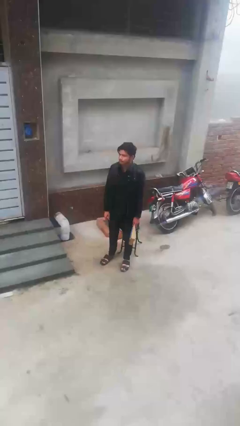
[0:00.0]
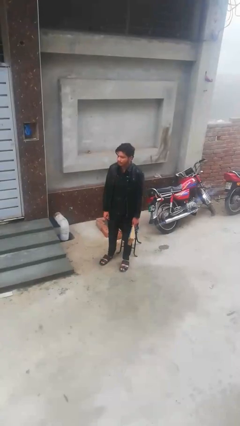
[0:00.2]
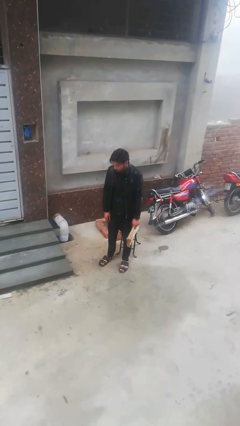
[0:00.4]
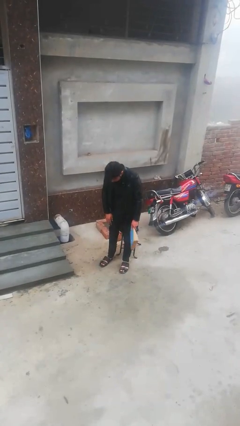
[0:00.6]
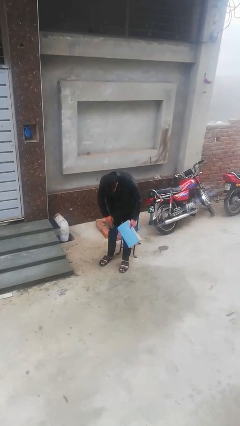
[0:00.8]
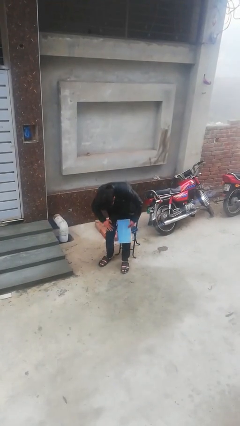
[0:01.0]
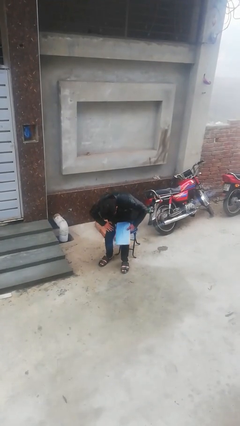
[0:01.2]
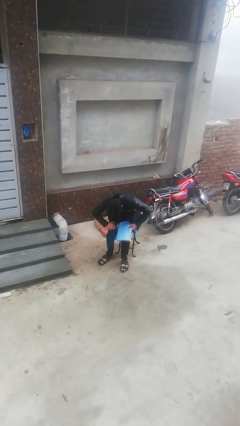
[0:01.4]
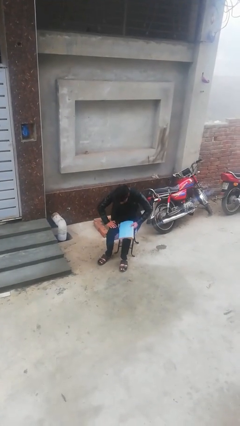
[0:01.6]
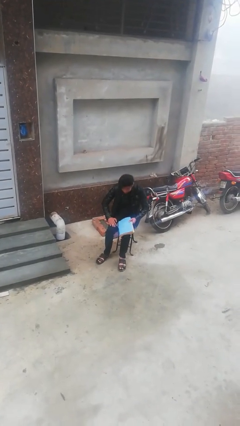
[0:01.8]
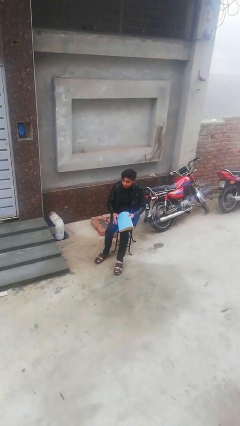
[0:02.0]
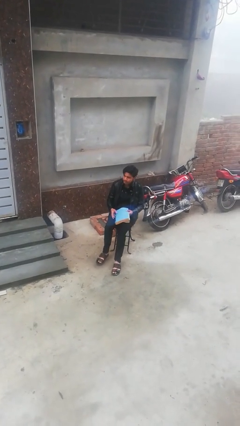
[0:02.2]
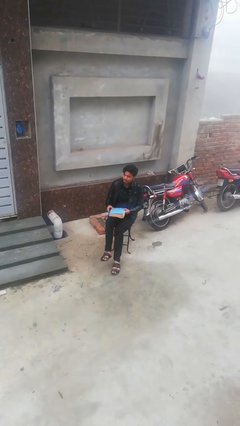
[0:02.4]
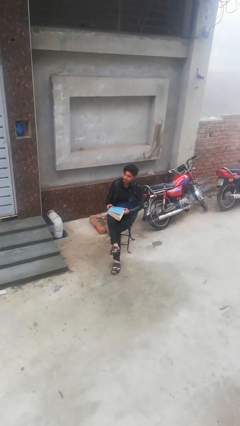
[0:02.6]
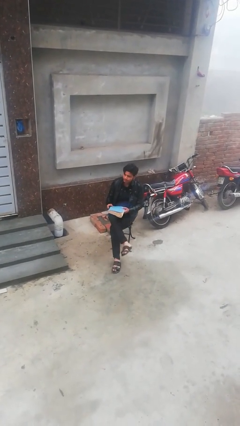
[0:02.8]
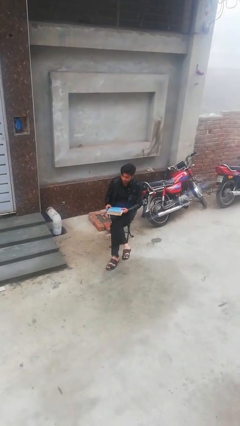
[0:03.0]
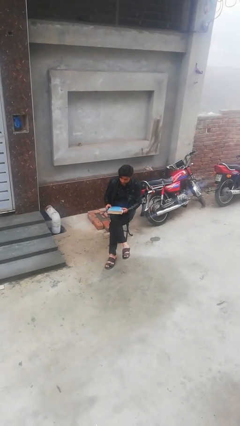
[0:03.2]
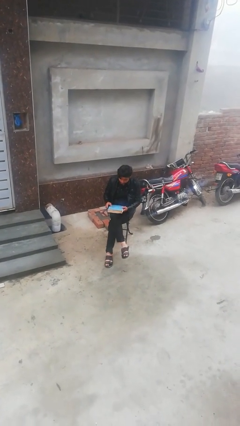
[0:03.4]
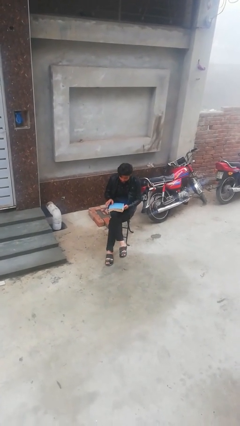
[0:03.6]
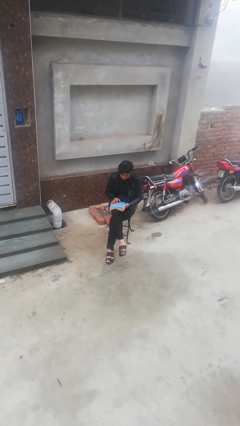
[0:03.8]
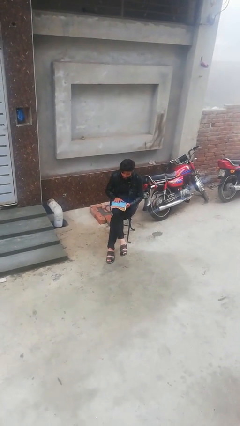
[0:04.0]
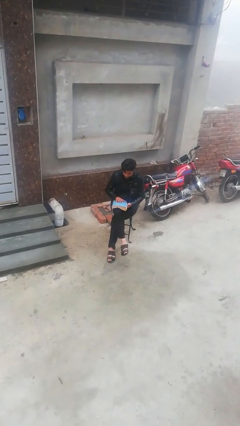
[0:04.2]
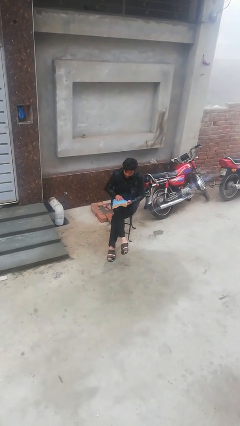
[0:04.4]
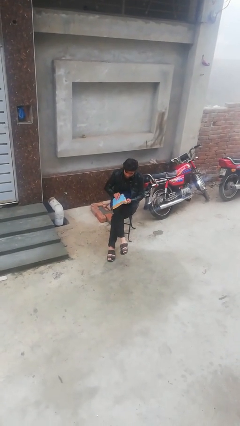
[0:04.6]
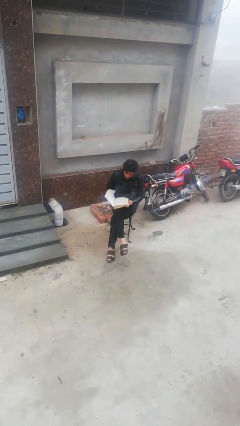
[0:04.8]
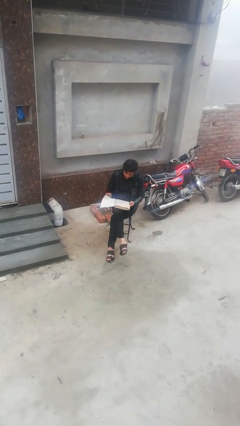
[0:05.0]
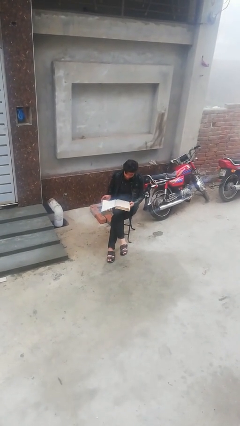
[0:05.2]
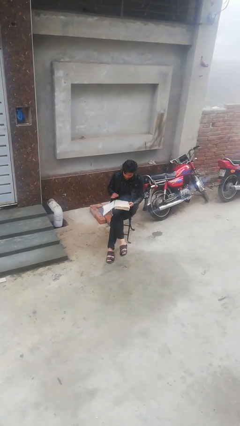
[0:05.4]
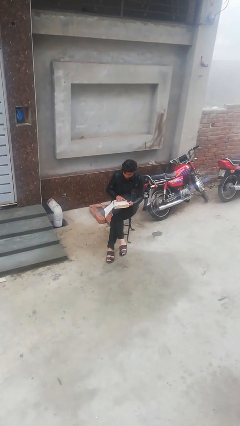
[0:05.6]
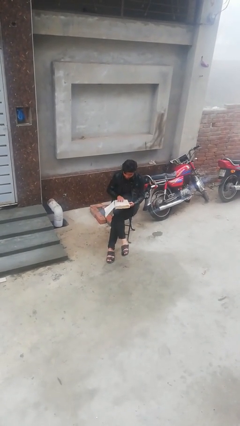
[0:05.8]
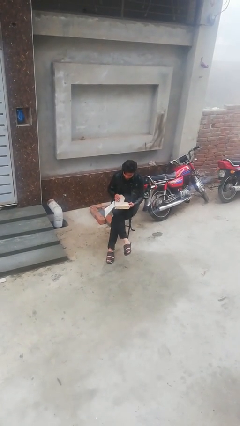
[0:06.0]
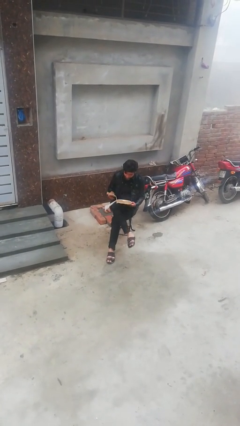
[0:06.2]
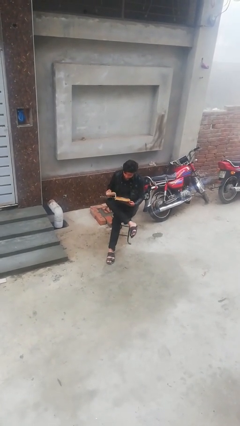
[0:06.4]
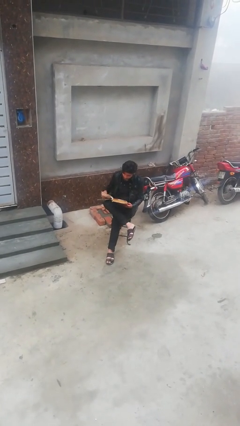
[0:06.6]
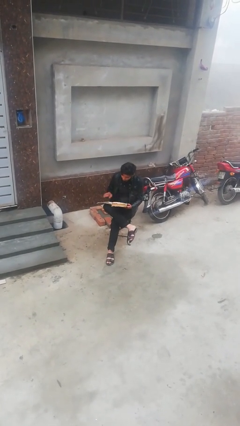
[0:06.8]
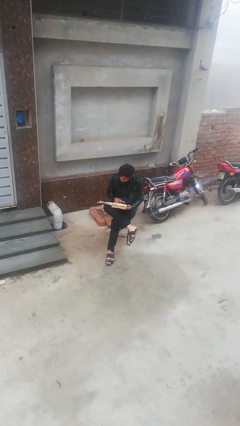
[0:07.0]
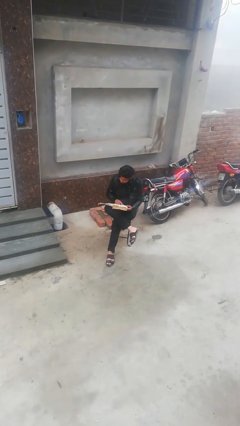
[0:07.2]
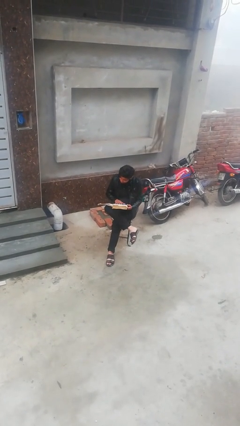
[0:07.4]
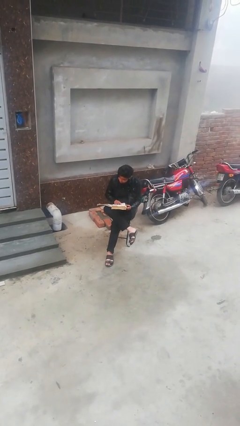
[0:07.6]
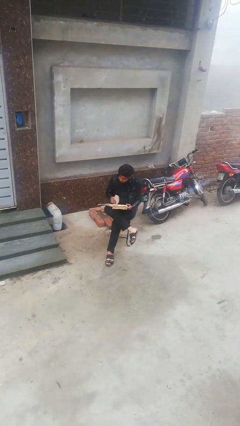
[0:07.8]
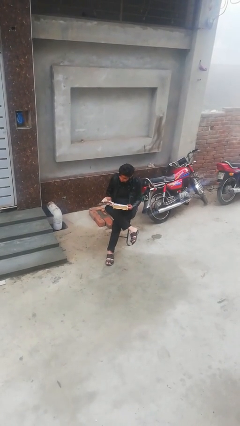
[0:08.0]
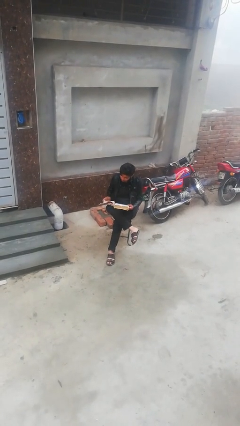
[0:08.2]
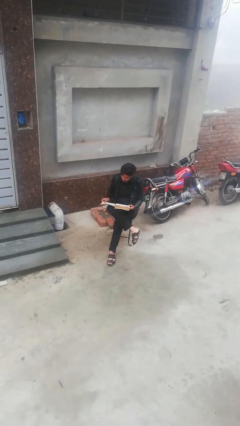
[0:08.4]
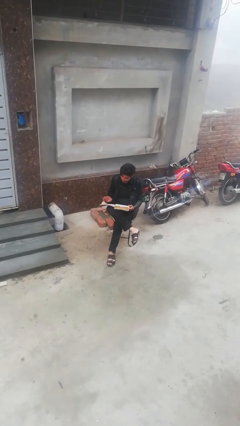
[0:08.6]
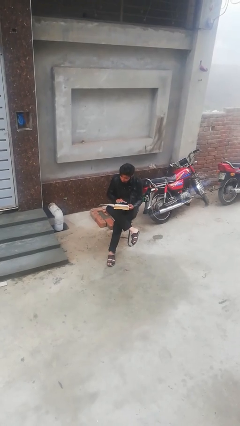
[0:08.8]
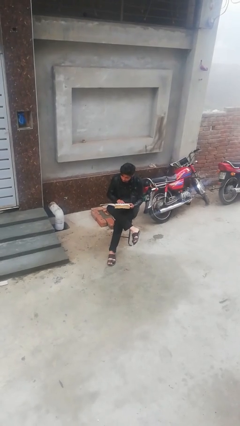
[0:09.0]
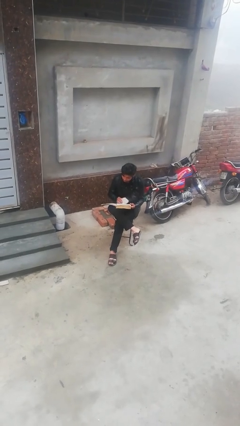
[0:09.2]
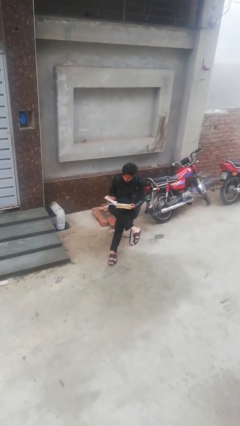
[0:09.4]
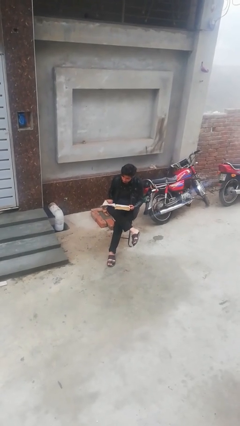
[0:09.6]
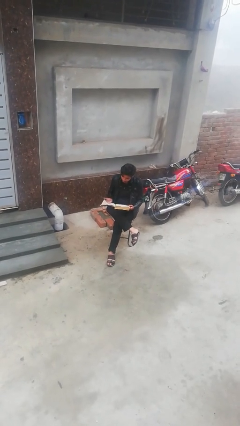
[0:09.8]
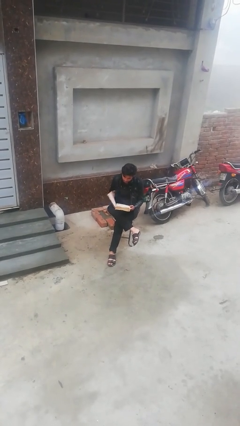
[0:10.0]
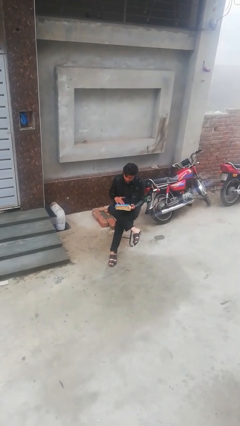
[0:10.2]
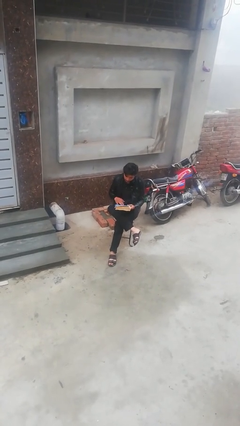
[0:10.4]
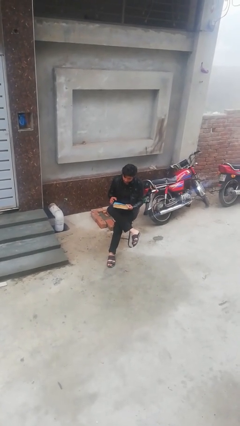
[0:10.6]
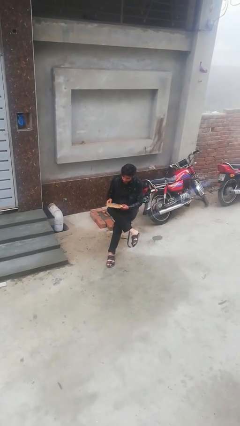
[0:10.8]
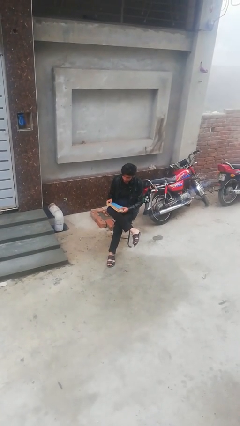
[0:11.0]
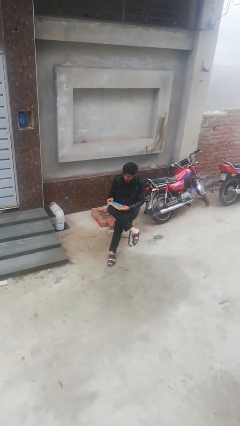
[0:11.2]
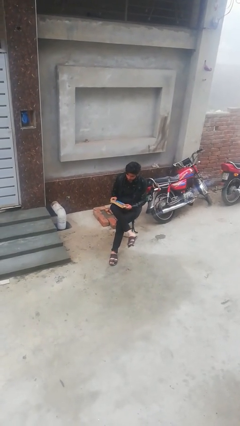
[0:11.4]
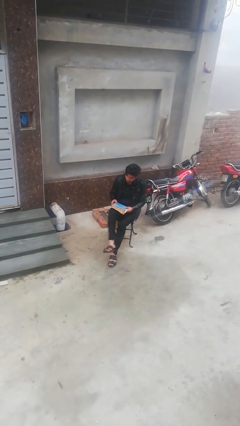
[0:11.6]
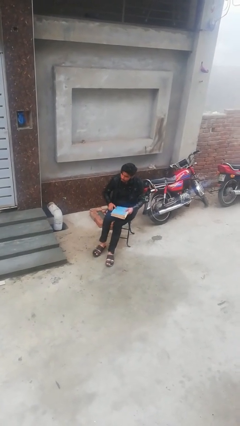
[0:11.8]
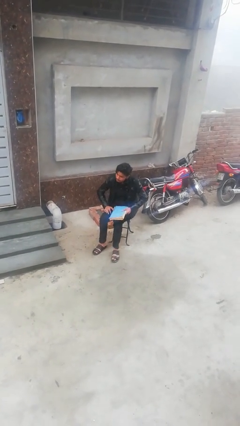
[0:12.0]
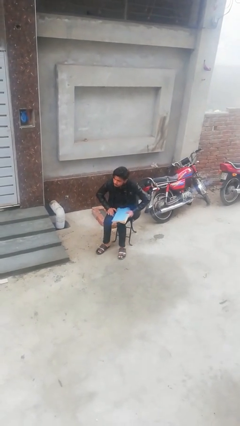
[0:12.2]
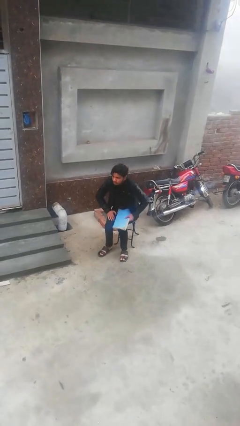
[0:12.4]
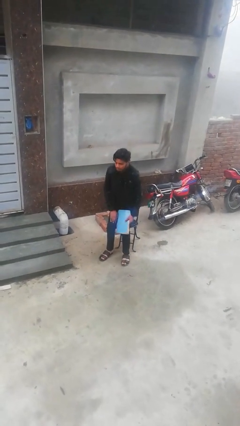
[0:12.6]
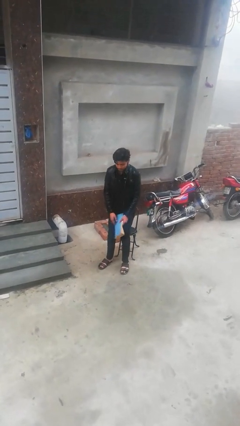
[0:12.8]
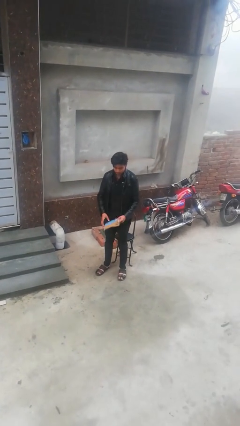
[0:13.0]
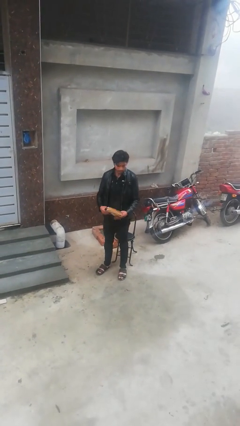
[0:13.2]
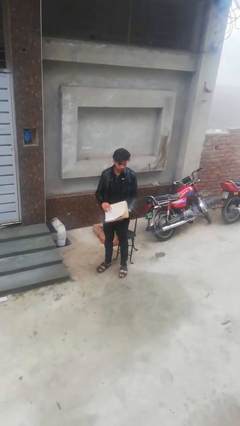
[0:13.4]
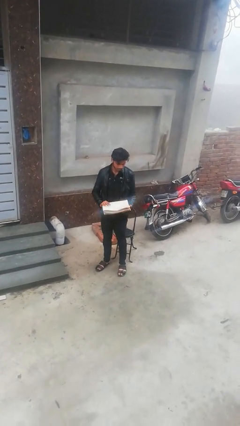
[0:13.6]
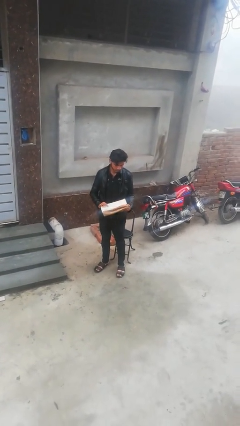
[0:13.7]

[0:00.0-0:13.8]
person reads document

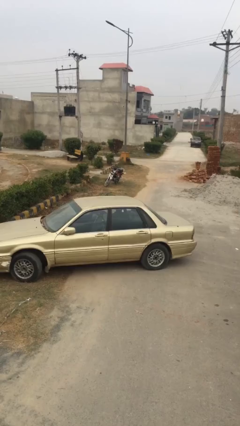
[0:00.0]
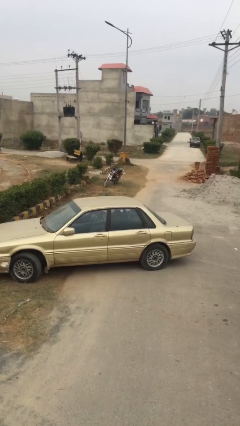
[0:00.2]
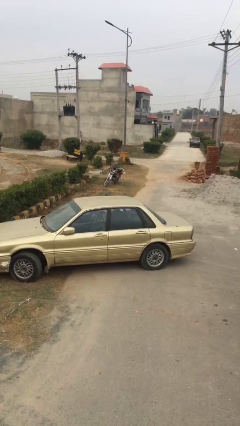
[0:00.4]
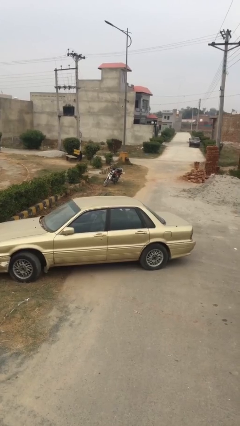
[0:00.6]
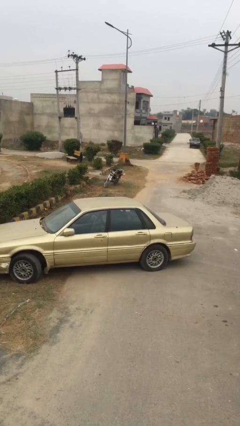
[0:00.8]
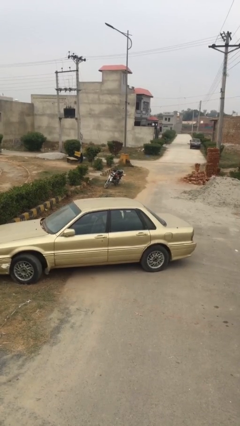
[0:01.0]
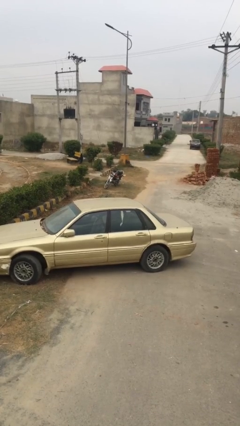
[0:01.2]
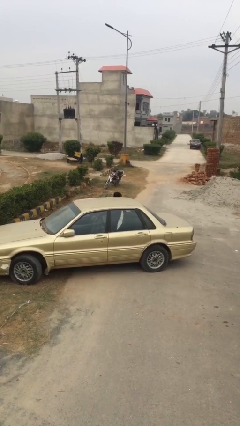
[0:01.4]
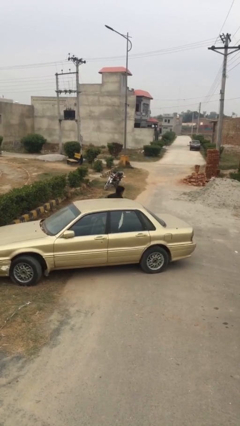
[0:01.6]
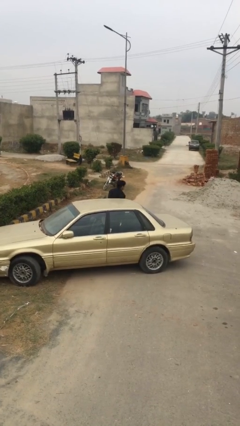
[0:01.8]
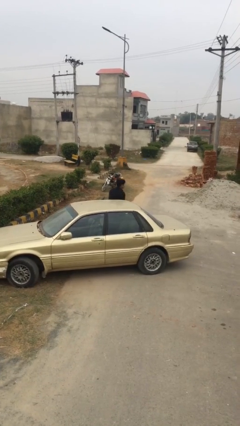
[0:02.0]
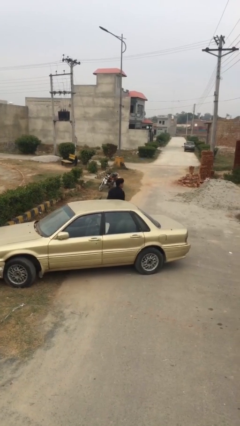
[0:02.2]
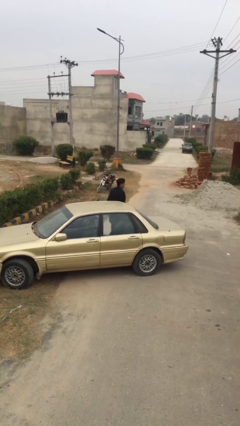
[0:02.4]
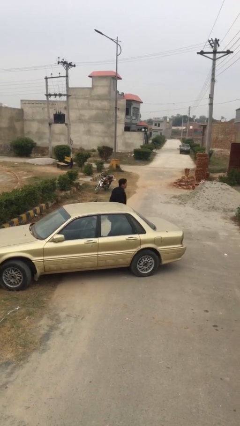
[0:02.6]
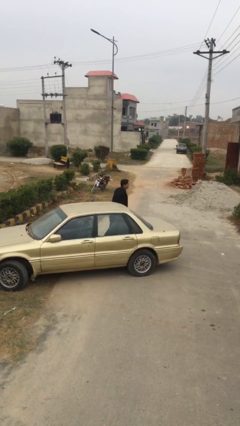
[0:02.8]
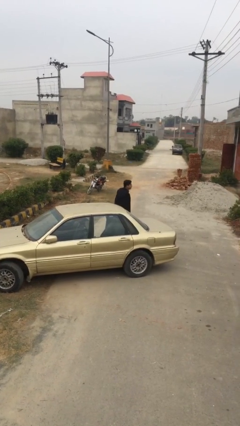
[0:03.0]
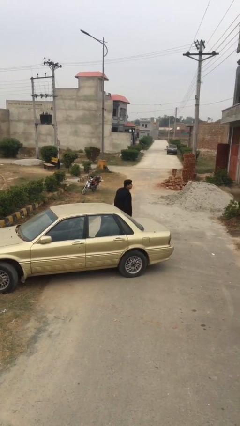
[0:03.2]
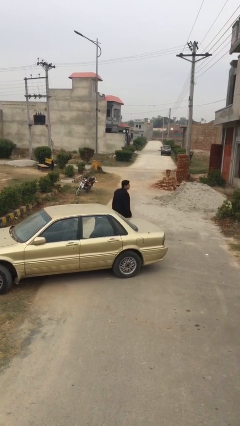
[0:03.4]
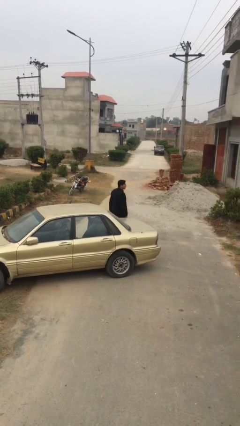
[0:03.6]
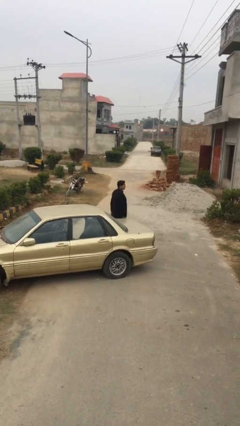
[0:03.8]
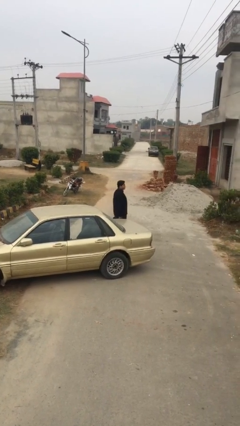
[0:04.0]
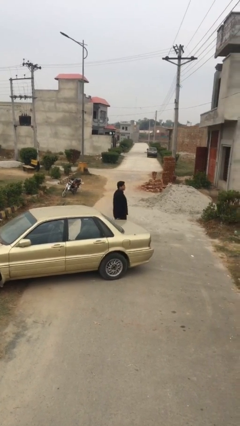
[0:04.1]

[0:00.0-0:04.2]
person exits car

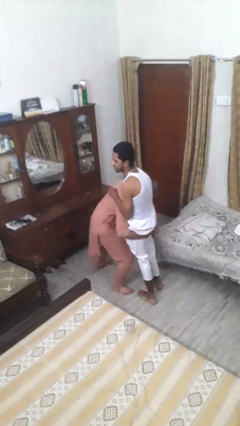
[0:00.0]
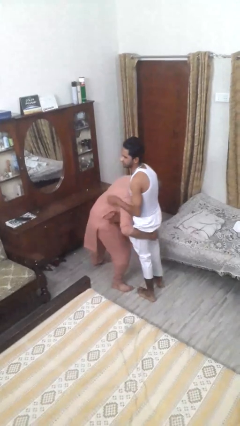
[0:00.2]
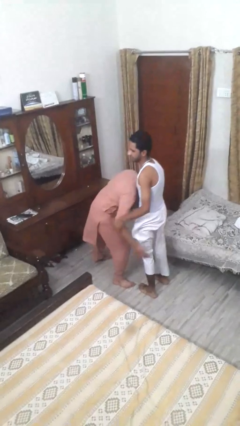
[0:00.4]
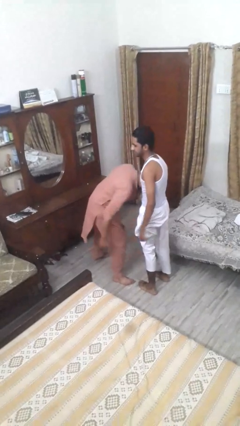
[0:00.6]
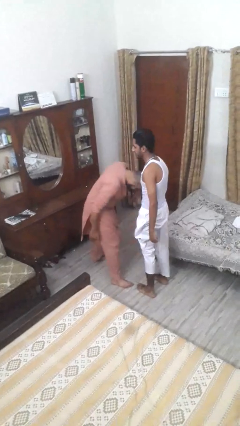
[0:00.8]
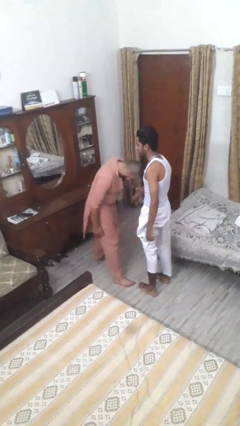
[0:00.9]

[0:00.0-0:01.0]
person puts down person
